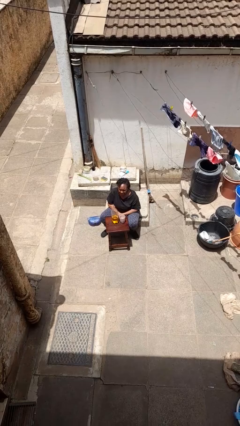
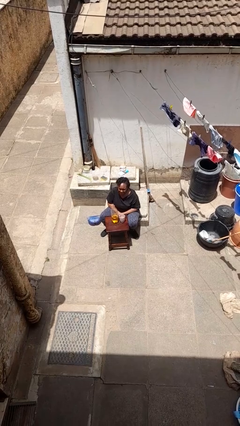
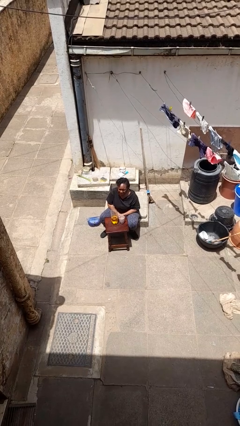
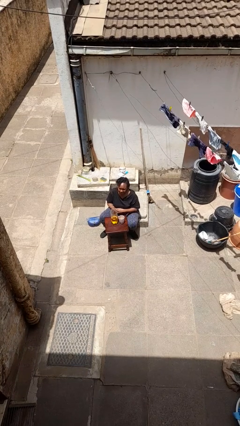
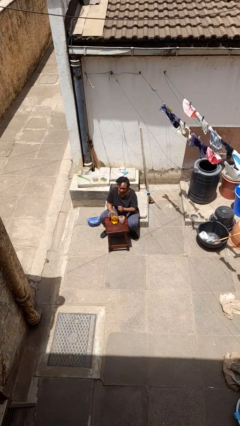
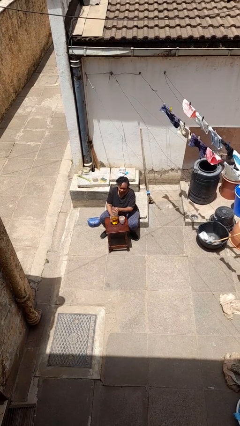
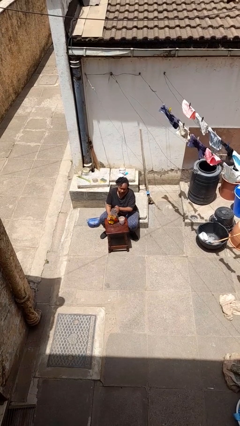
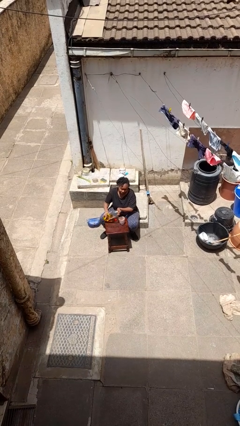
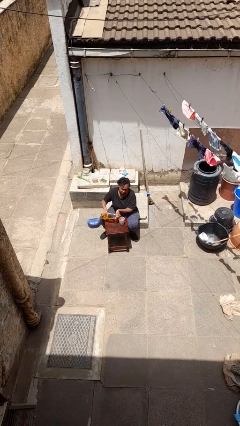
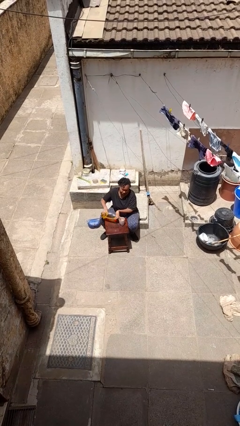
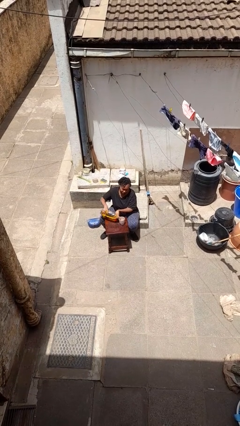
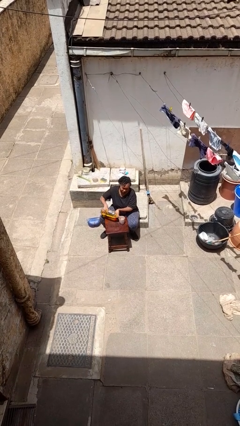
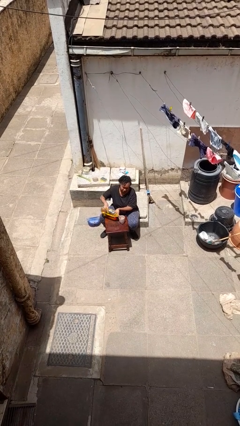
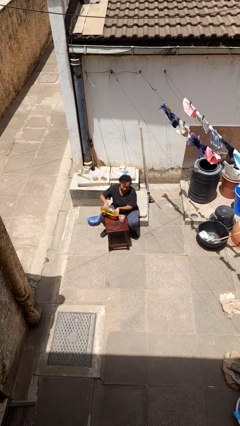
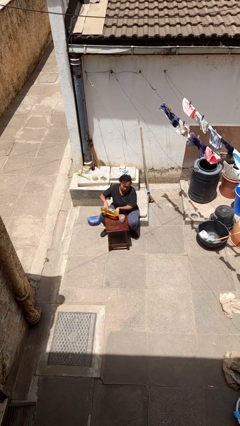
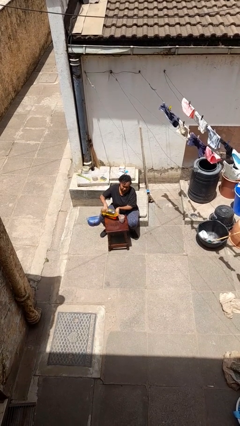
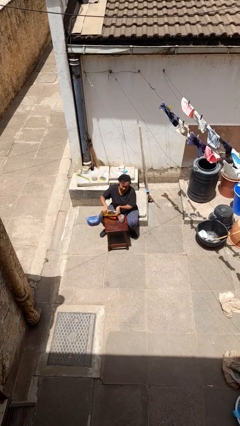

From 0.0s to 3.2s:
person pours liquid into cup

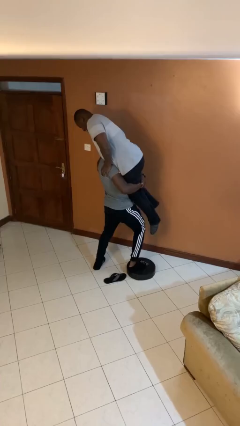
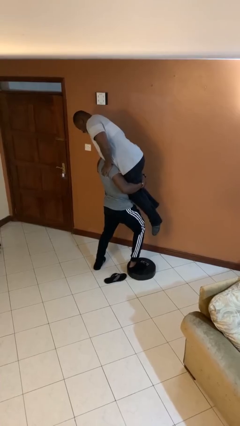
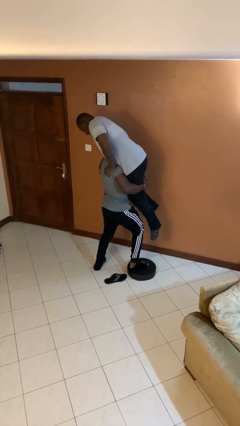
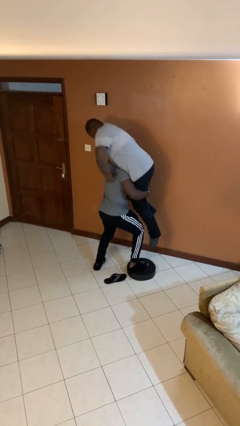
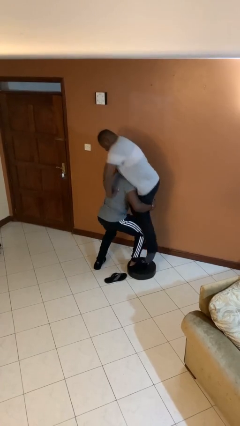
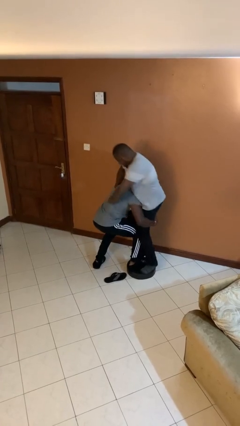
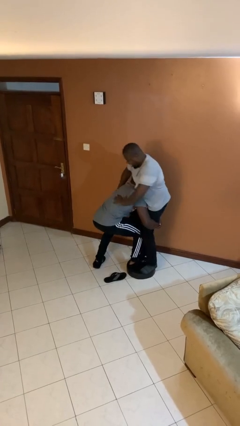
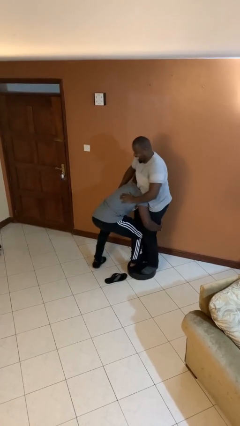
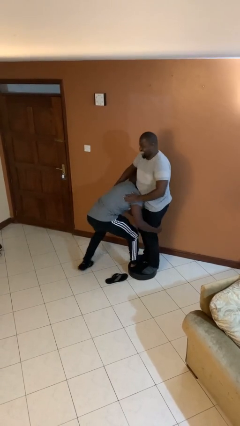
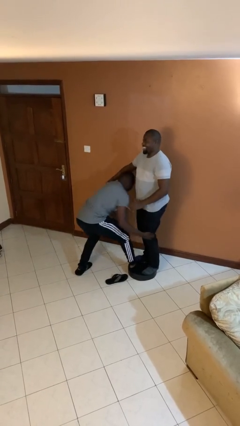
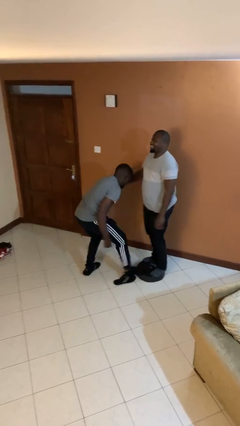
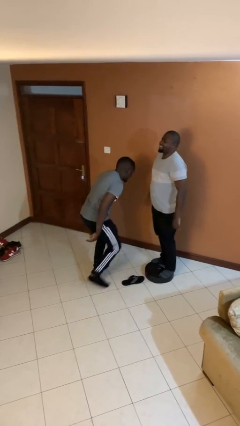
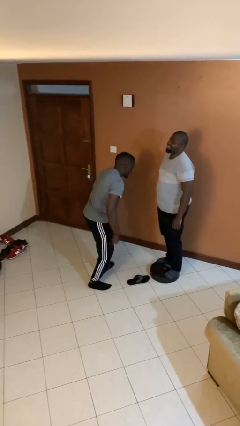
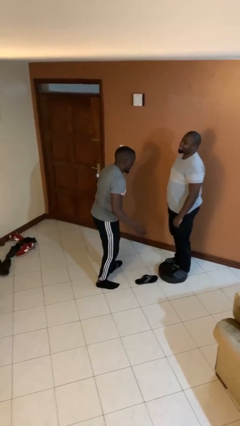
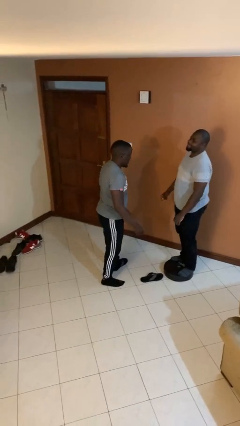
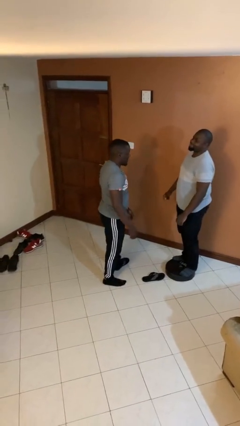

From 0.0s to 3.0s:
person puts down person

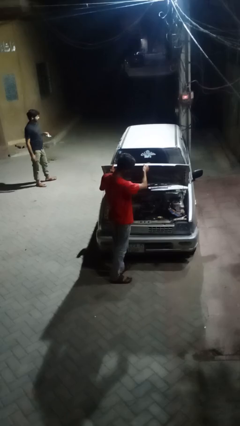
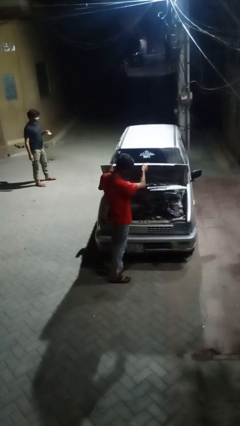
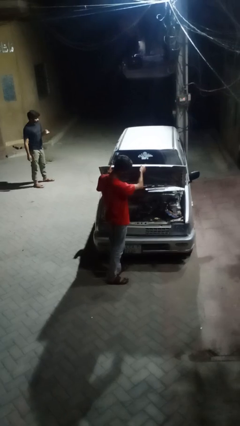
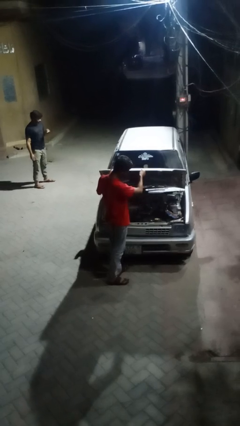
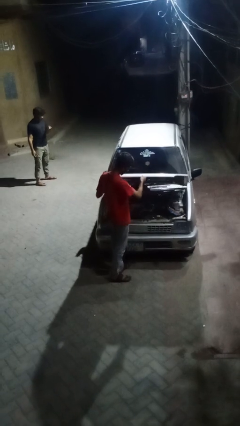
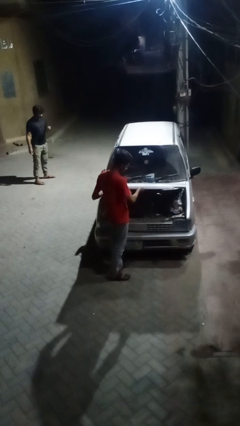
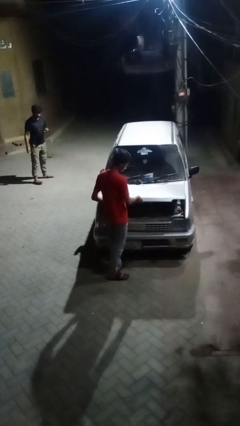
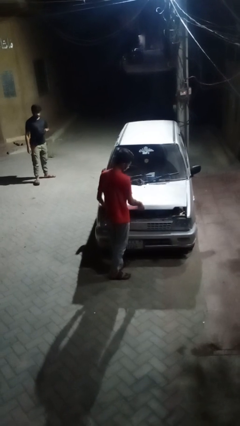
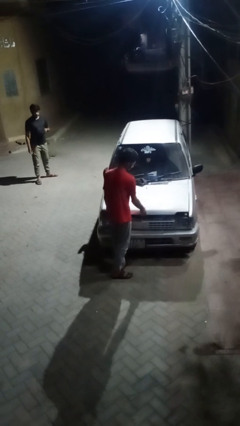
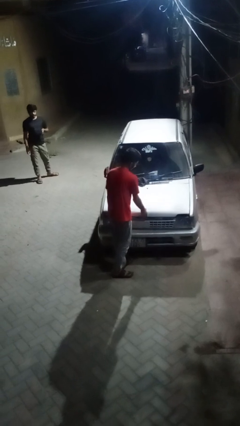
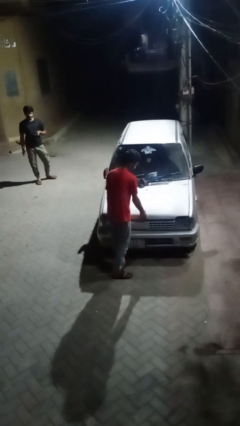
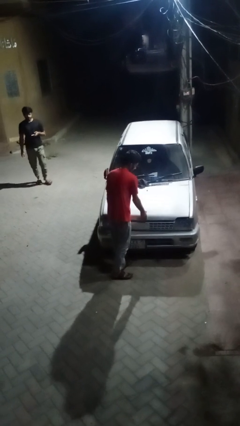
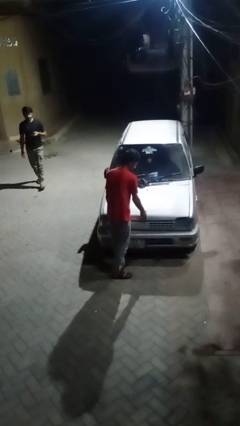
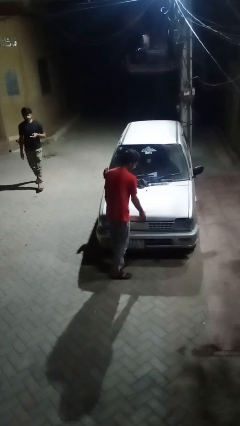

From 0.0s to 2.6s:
person closes car hood

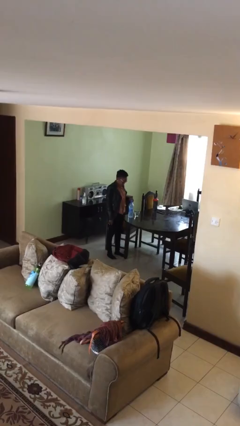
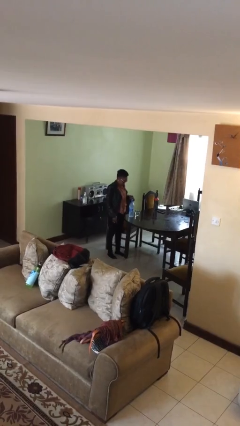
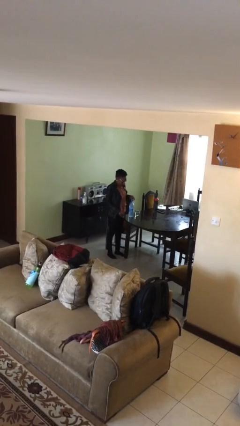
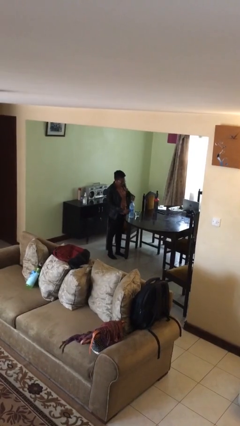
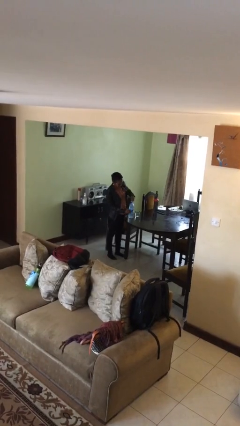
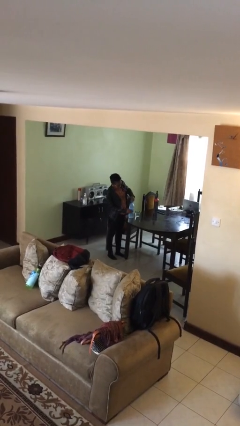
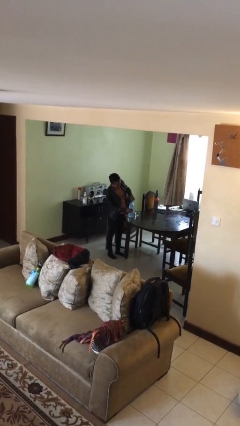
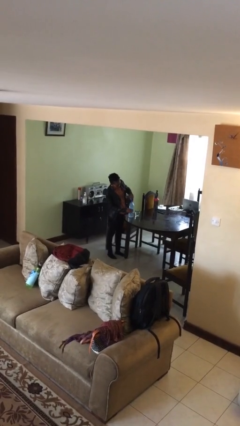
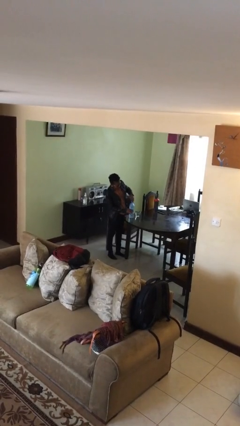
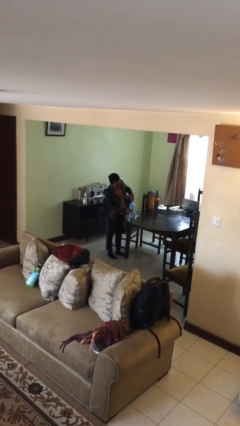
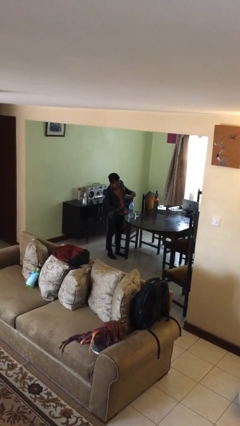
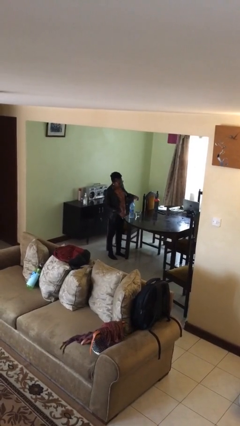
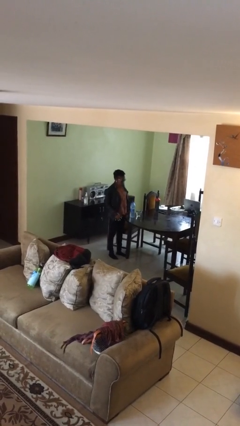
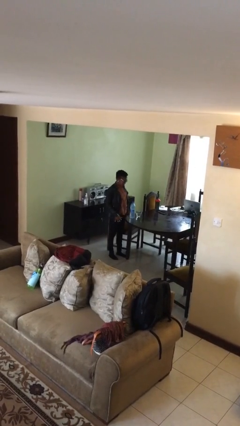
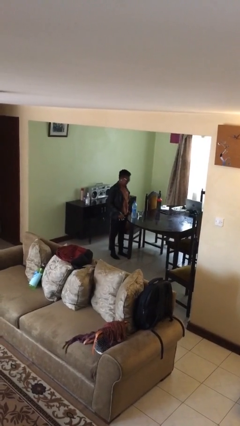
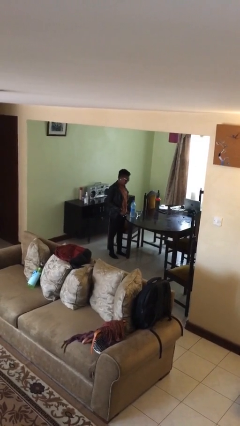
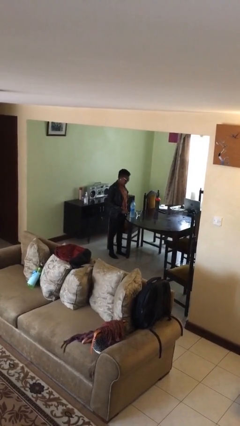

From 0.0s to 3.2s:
person unscrews lid from bottle

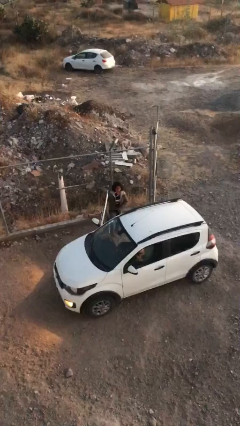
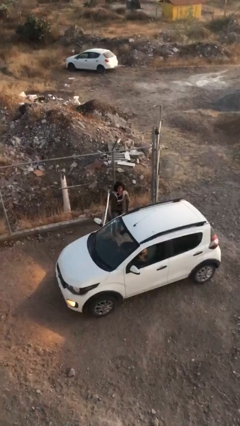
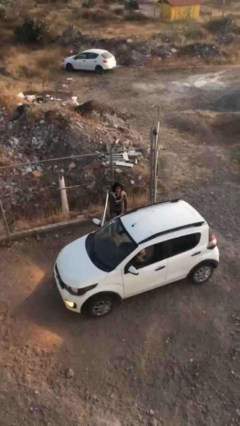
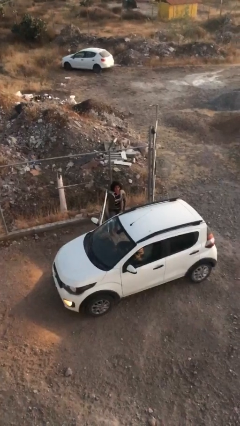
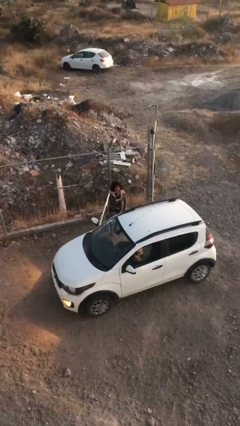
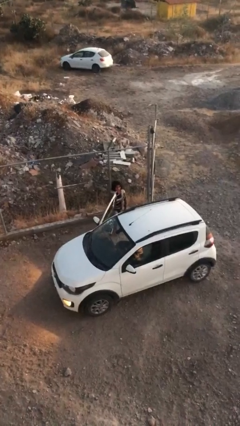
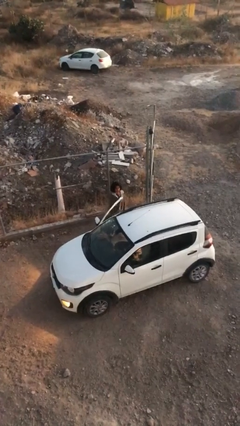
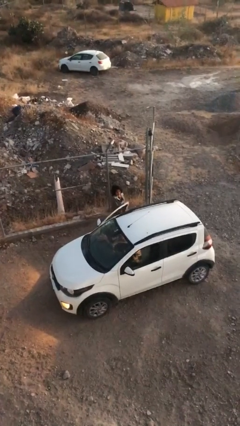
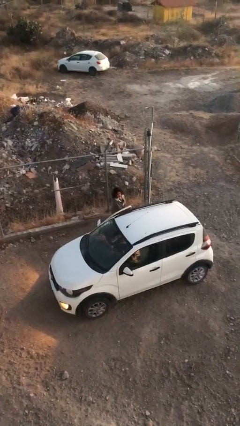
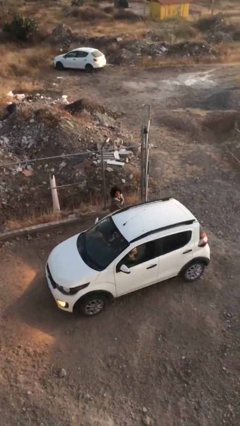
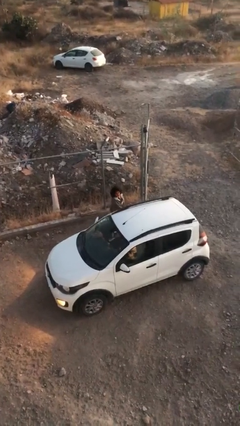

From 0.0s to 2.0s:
person closes car door

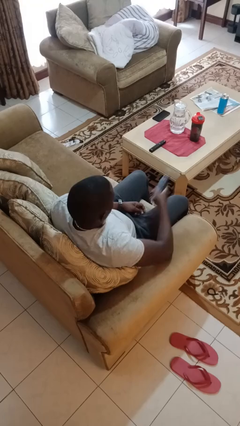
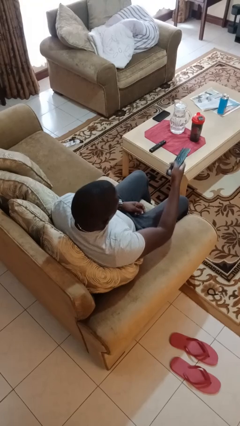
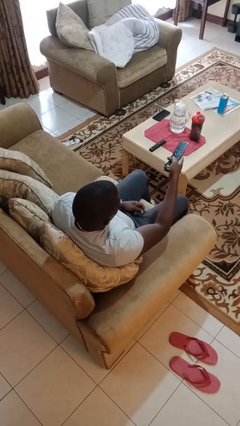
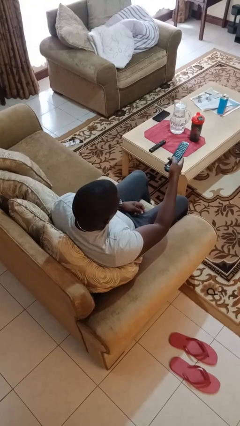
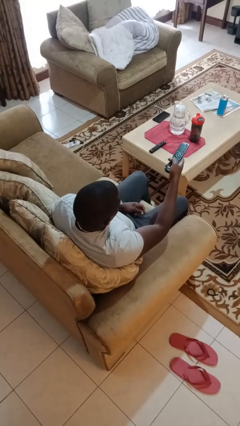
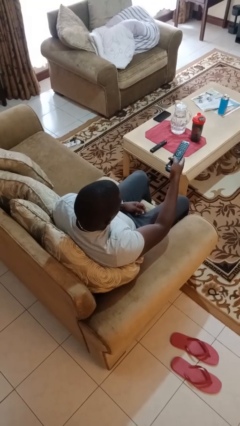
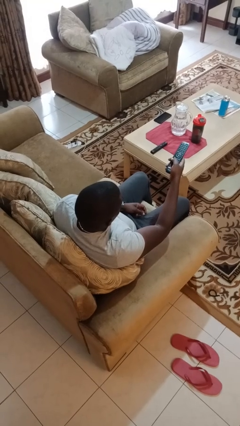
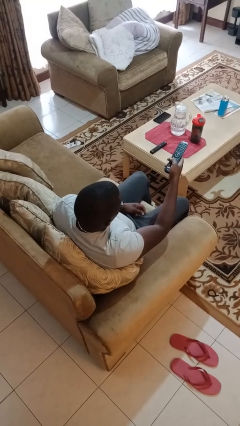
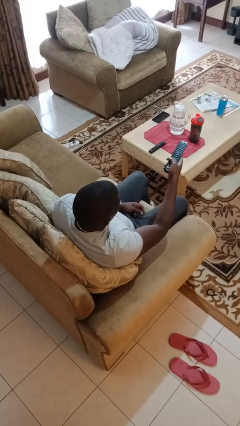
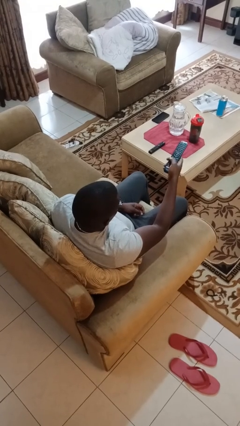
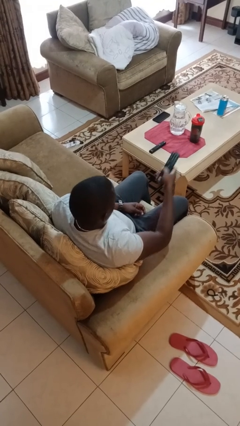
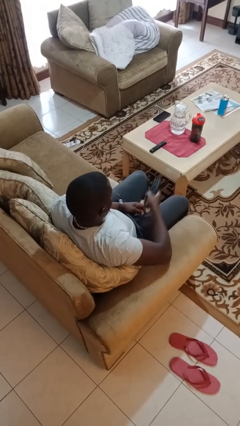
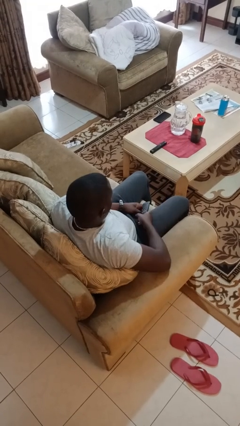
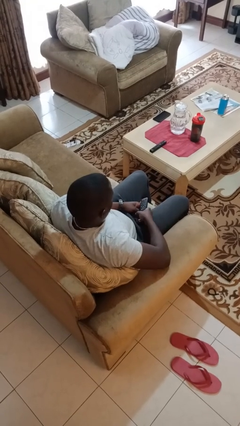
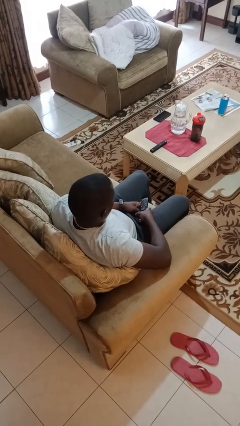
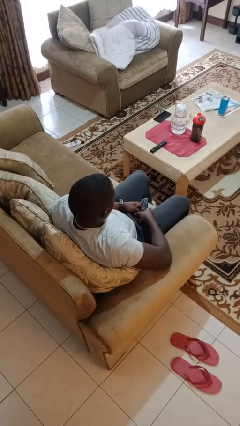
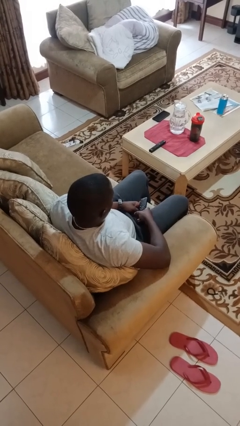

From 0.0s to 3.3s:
person uses television remote

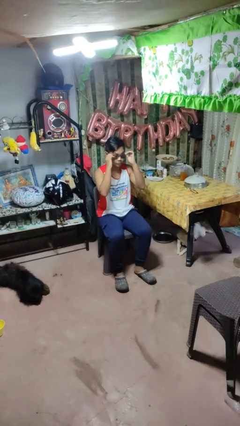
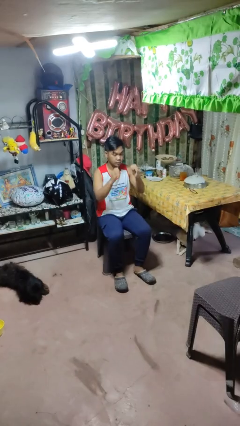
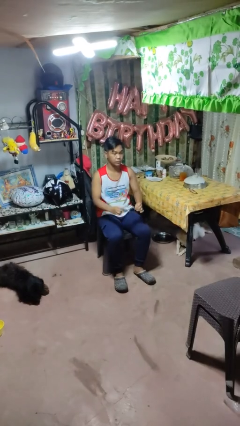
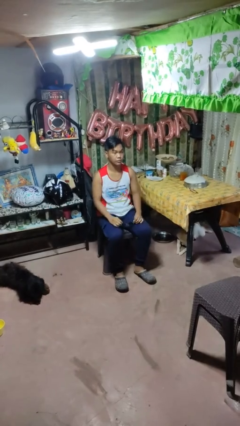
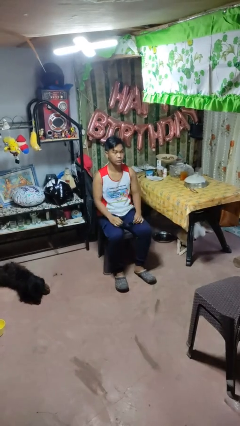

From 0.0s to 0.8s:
person takes off sunglasses
